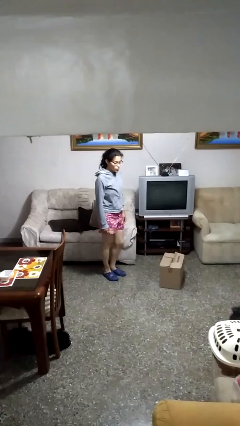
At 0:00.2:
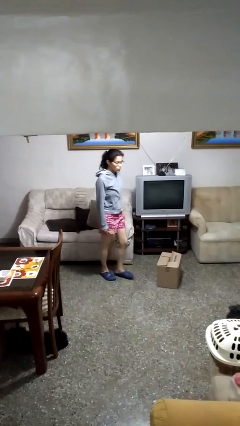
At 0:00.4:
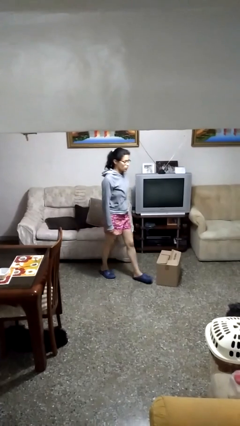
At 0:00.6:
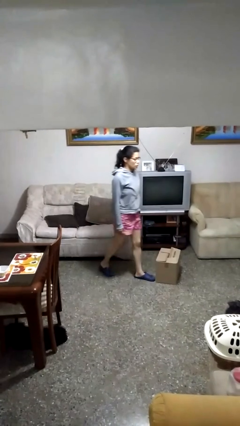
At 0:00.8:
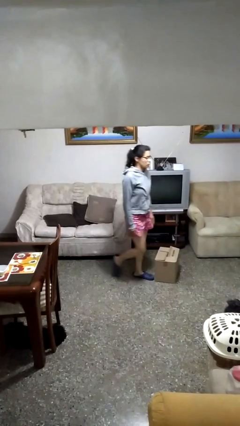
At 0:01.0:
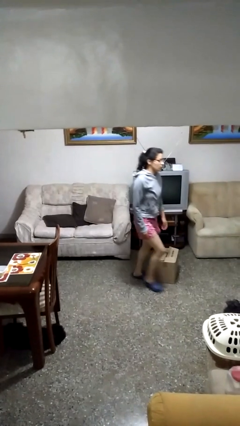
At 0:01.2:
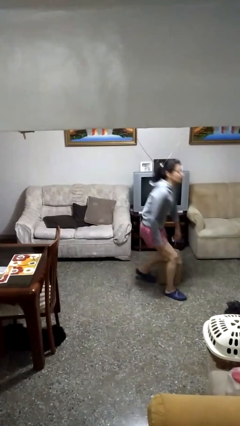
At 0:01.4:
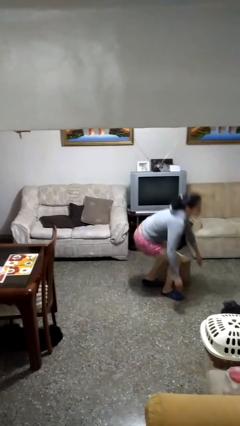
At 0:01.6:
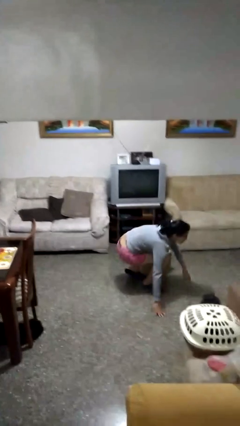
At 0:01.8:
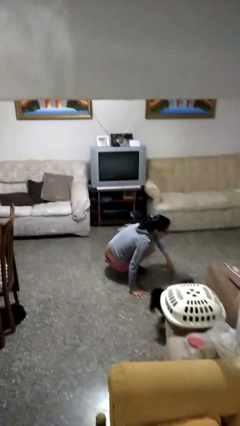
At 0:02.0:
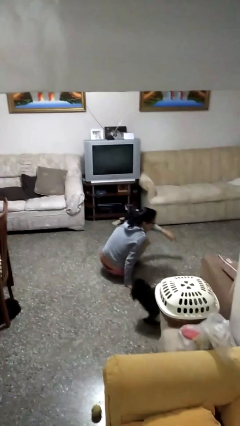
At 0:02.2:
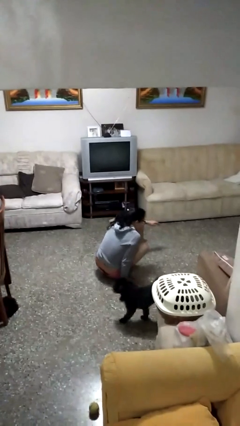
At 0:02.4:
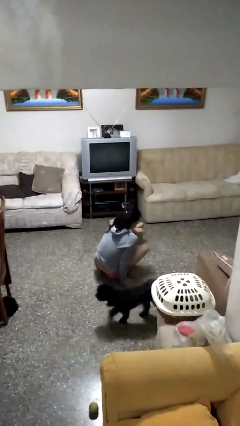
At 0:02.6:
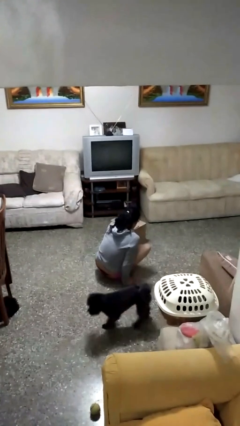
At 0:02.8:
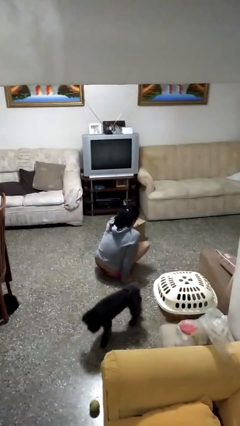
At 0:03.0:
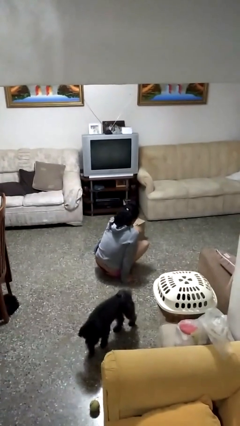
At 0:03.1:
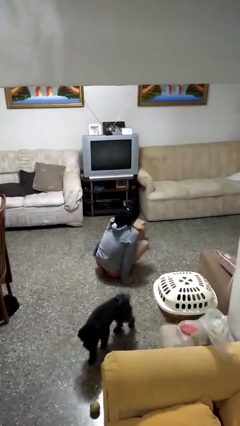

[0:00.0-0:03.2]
person trips on object on floor

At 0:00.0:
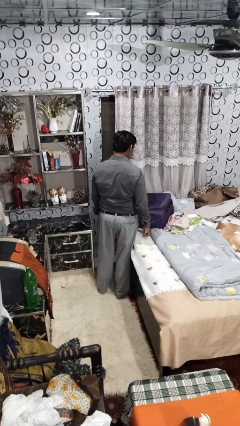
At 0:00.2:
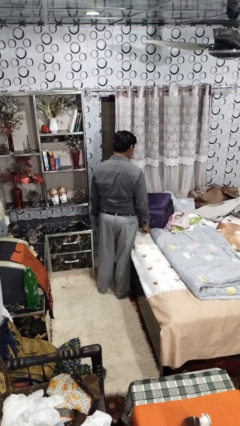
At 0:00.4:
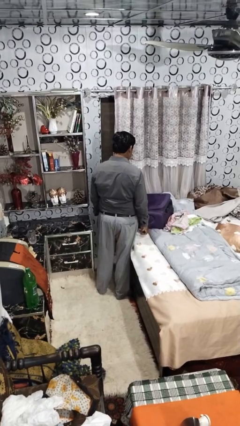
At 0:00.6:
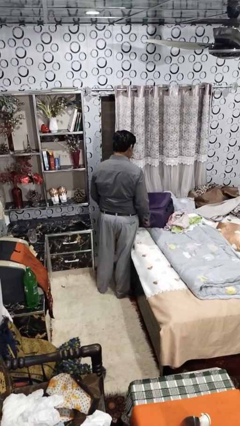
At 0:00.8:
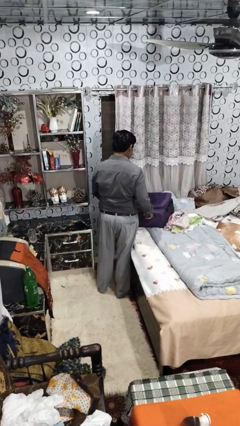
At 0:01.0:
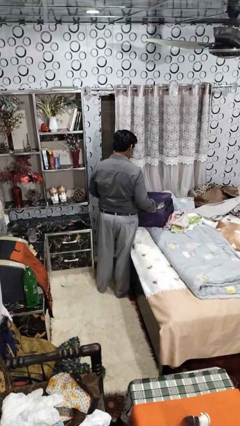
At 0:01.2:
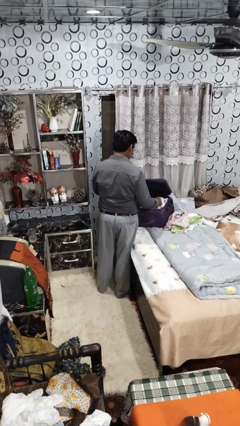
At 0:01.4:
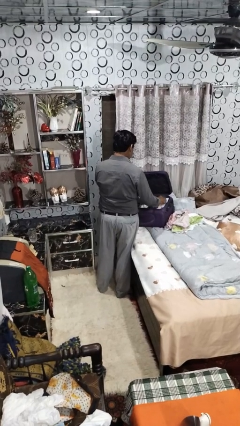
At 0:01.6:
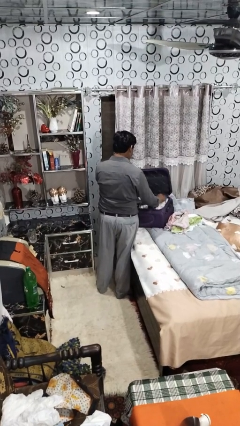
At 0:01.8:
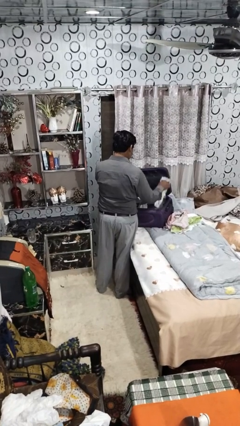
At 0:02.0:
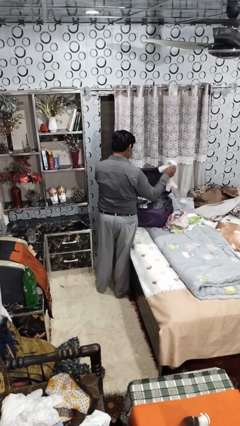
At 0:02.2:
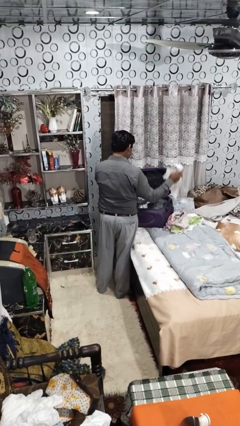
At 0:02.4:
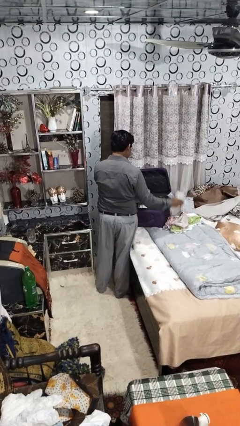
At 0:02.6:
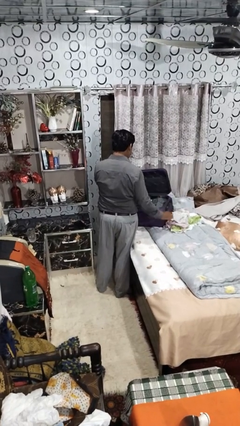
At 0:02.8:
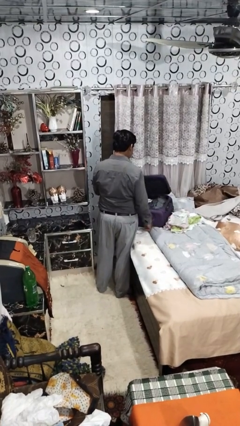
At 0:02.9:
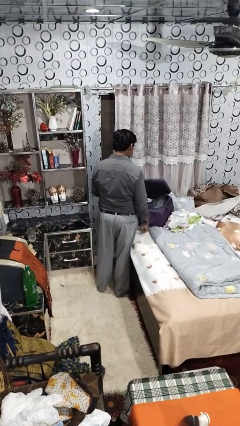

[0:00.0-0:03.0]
person unloads clothes from suitcase

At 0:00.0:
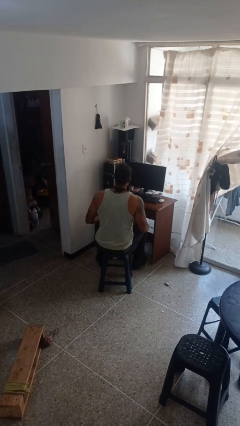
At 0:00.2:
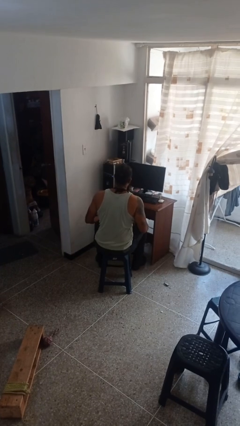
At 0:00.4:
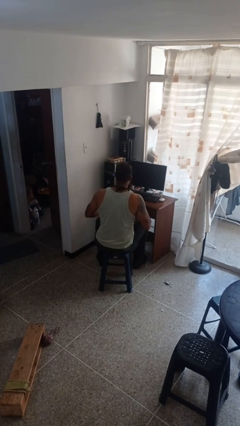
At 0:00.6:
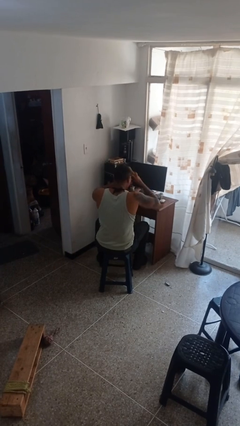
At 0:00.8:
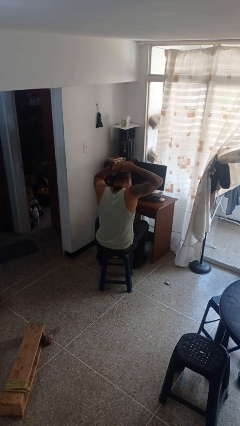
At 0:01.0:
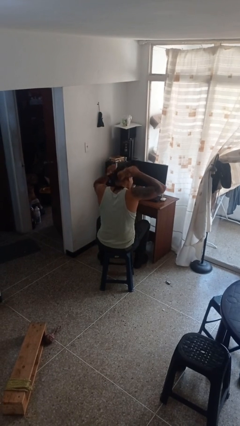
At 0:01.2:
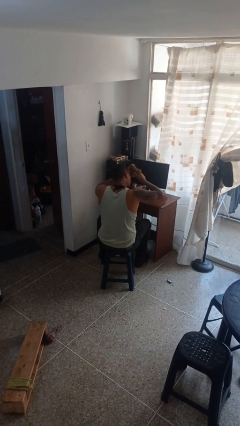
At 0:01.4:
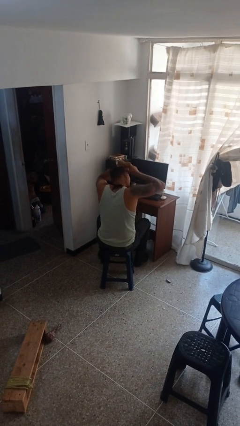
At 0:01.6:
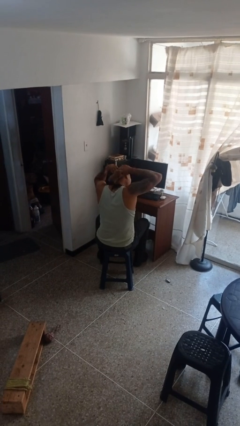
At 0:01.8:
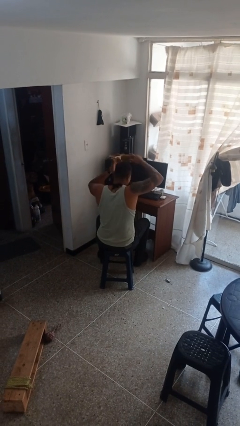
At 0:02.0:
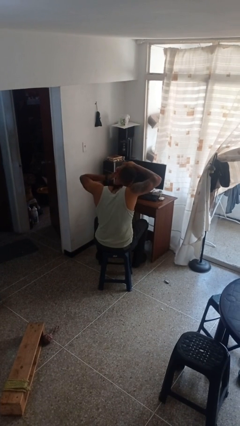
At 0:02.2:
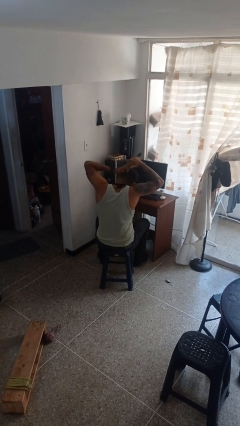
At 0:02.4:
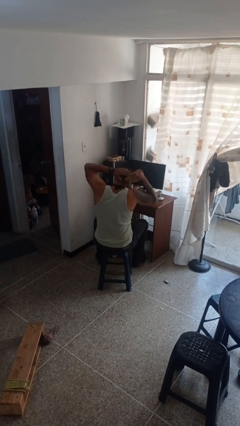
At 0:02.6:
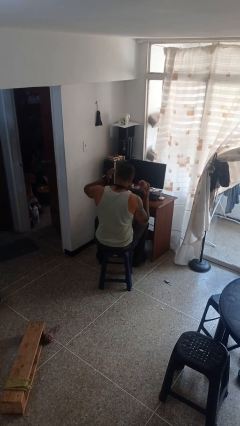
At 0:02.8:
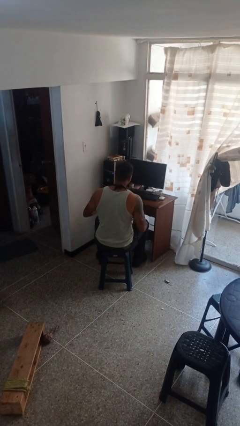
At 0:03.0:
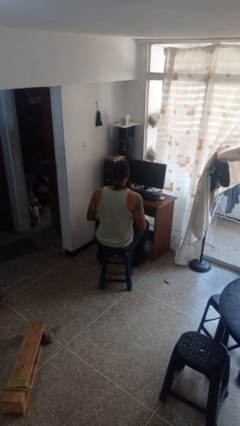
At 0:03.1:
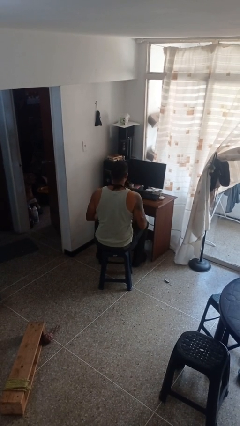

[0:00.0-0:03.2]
person brushes hair

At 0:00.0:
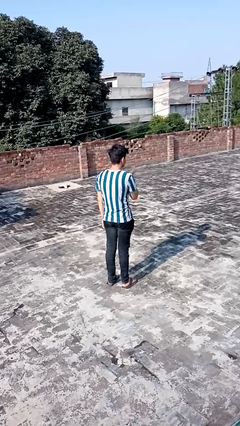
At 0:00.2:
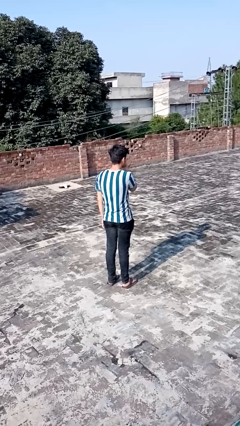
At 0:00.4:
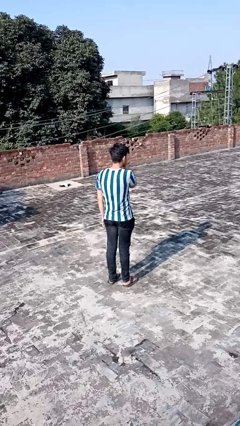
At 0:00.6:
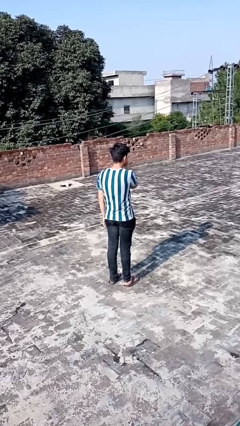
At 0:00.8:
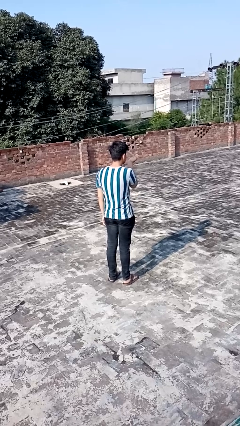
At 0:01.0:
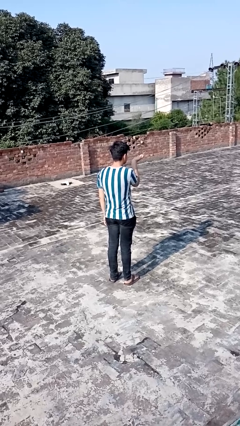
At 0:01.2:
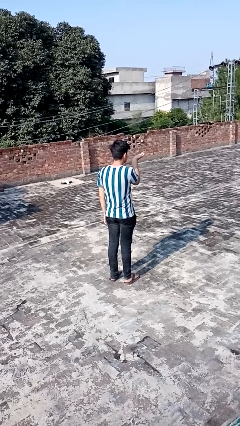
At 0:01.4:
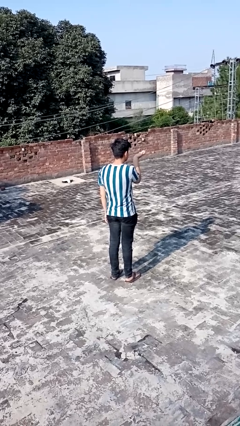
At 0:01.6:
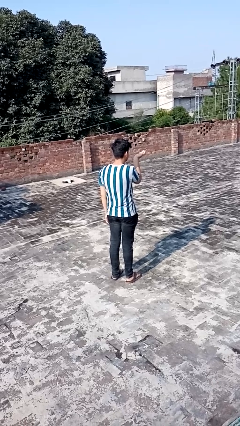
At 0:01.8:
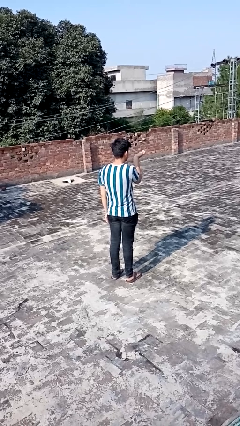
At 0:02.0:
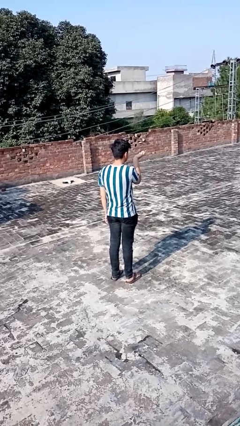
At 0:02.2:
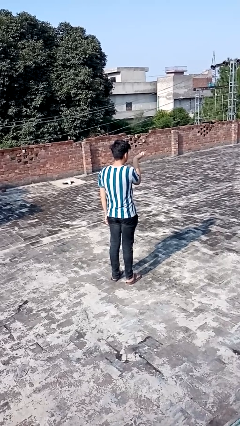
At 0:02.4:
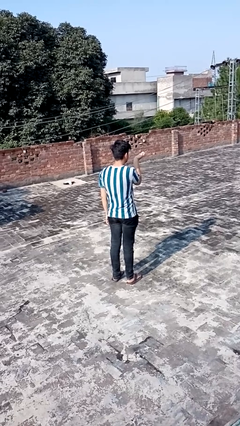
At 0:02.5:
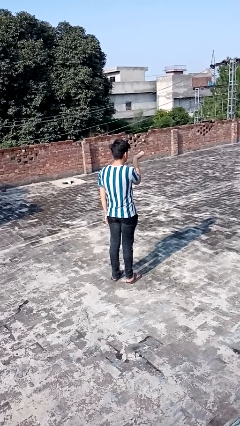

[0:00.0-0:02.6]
person gestures blow kiss

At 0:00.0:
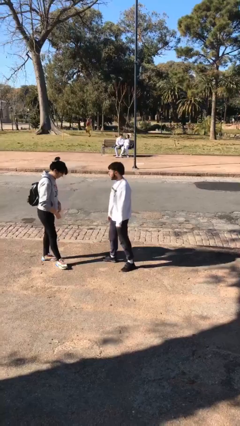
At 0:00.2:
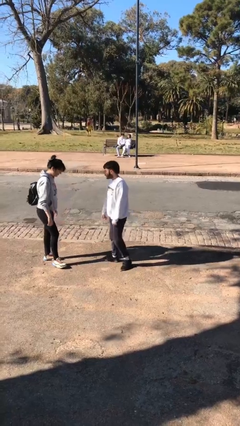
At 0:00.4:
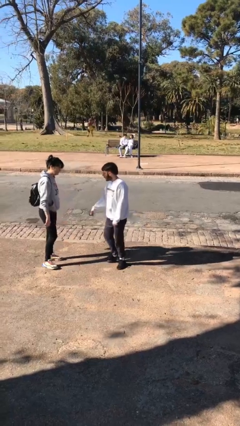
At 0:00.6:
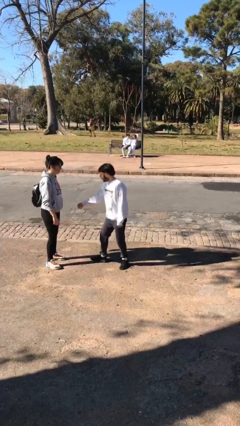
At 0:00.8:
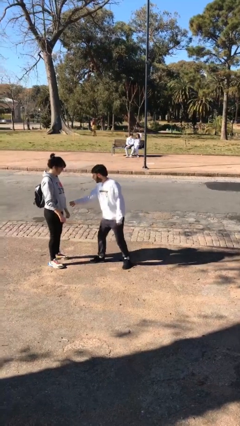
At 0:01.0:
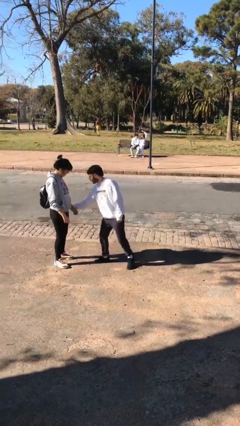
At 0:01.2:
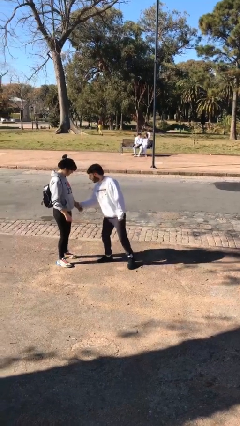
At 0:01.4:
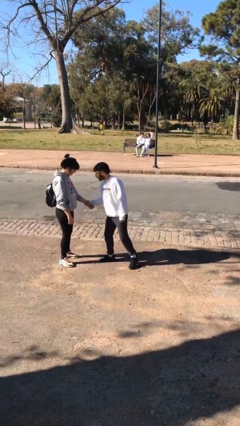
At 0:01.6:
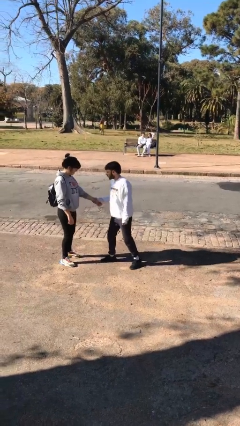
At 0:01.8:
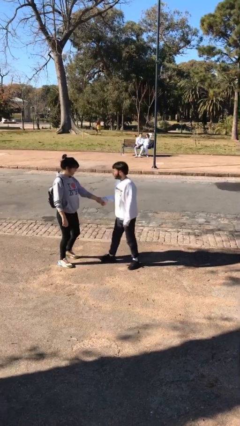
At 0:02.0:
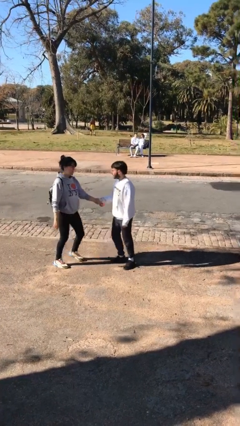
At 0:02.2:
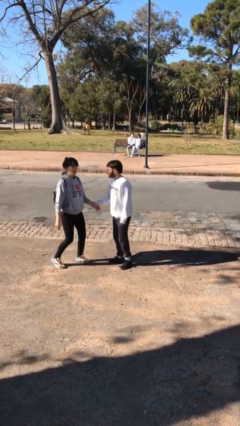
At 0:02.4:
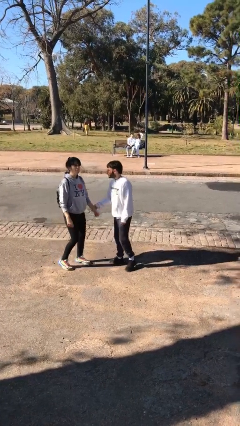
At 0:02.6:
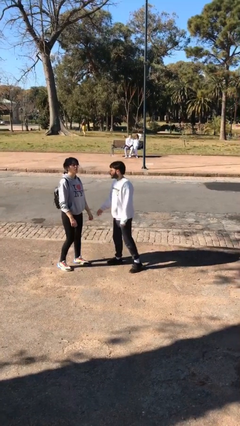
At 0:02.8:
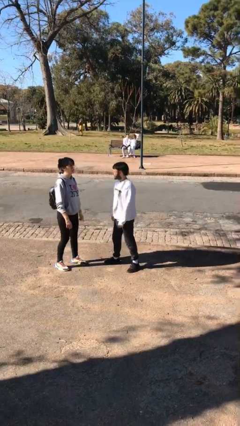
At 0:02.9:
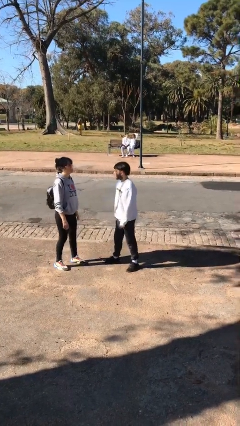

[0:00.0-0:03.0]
person grabs person by forearm

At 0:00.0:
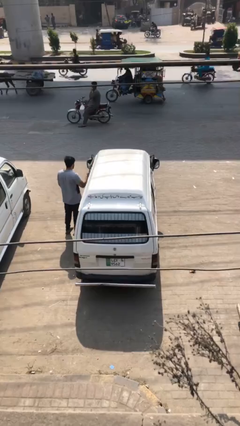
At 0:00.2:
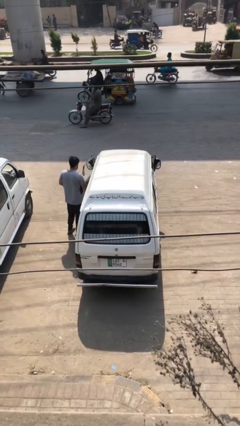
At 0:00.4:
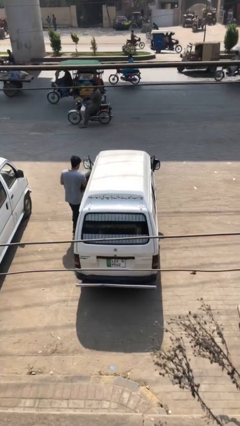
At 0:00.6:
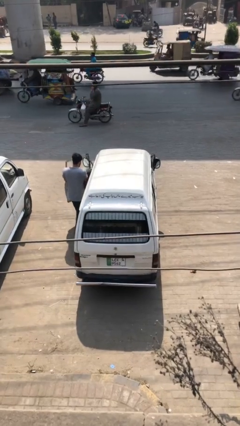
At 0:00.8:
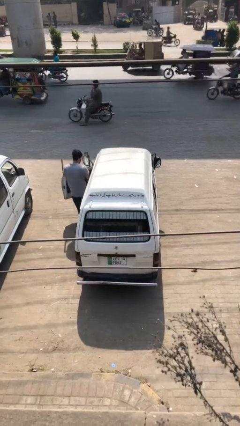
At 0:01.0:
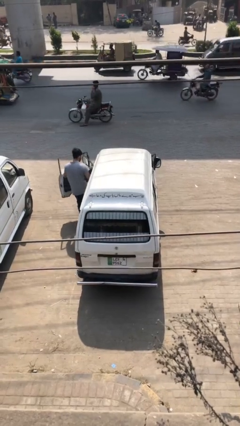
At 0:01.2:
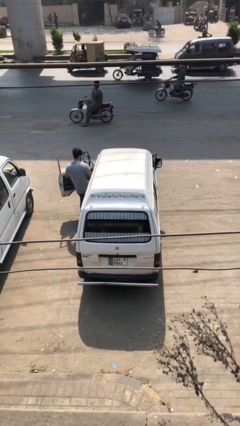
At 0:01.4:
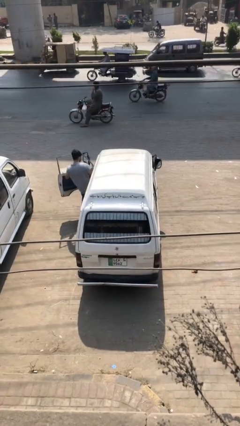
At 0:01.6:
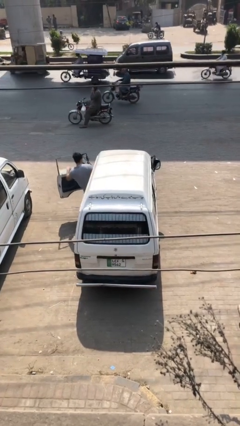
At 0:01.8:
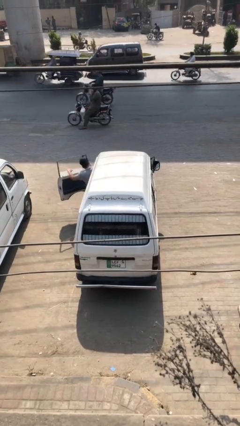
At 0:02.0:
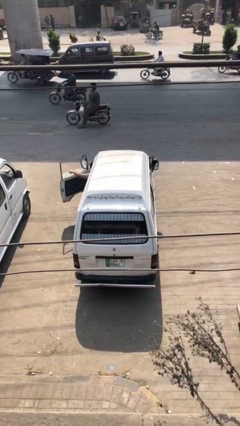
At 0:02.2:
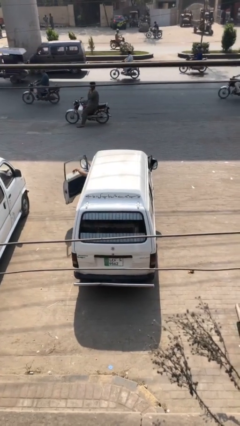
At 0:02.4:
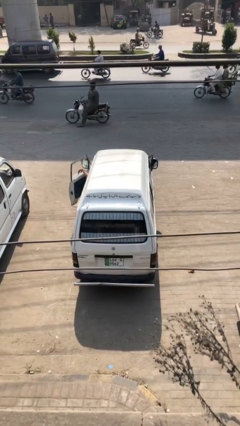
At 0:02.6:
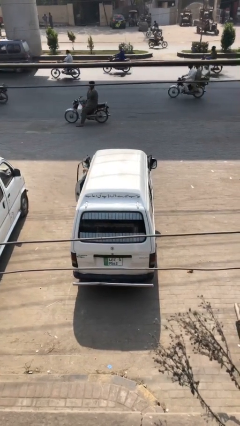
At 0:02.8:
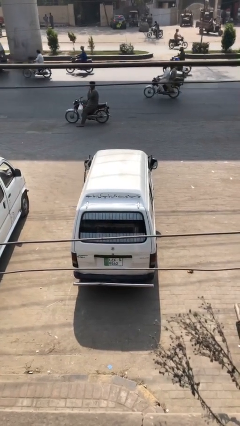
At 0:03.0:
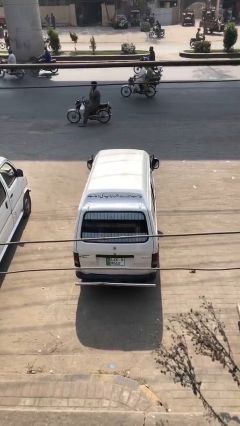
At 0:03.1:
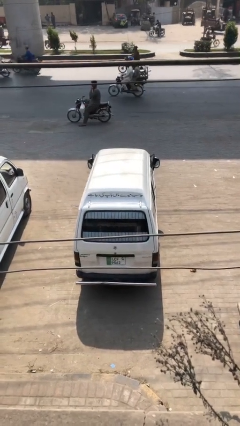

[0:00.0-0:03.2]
car picks up person
